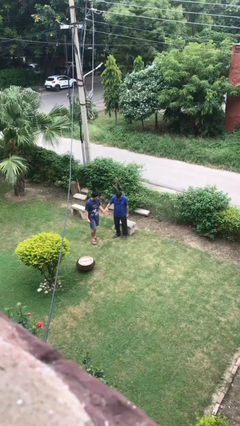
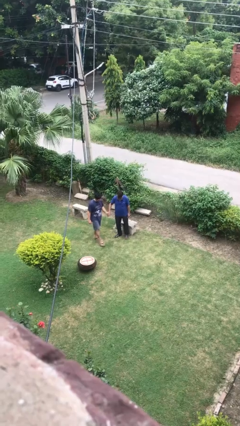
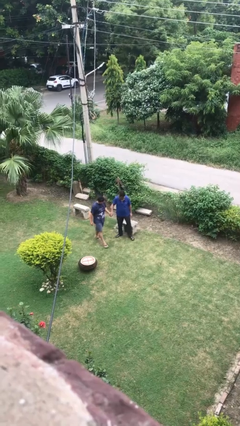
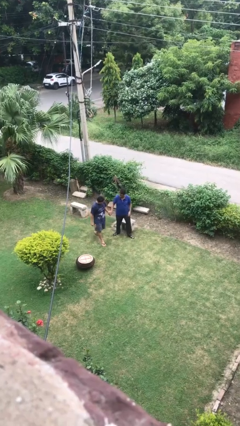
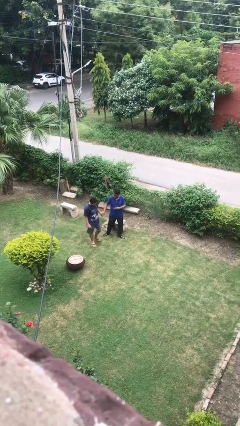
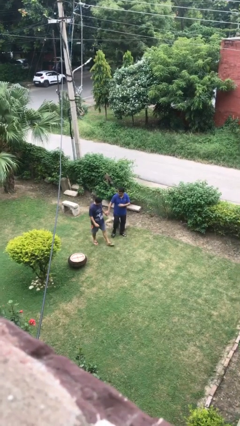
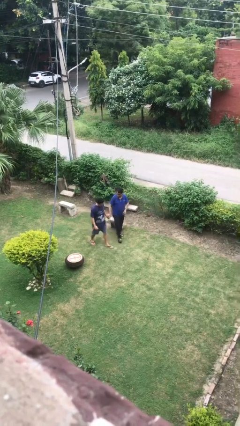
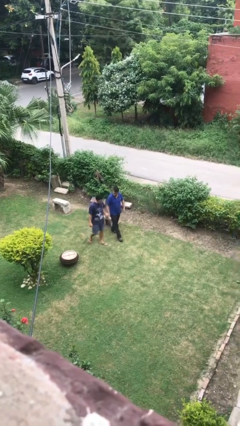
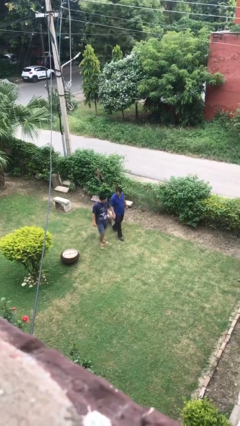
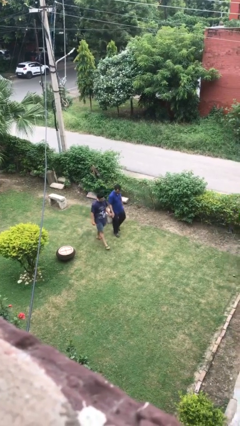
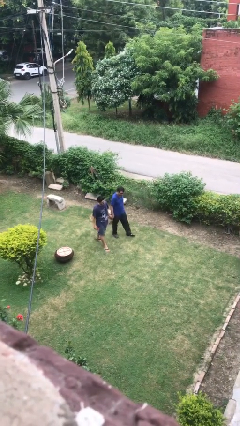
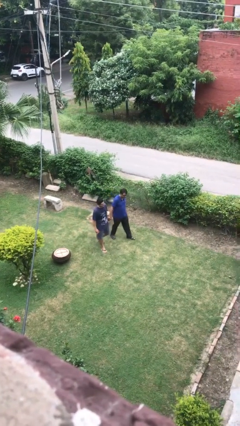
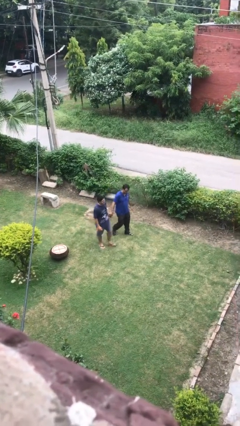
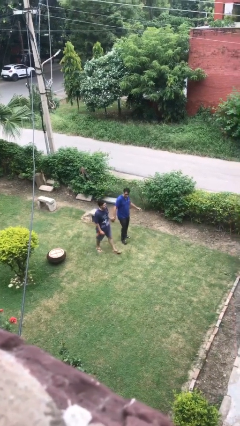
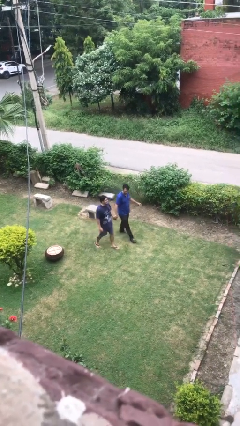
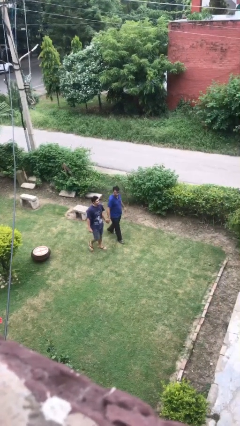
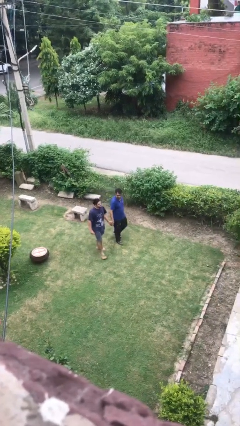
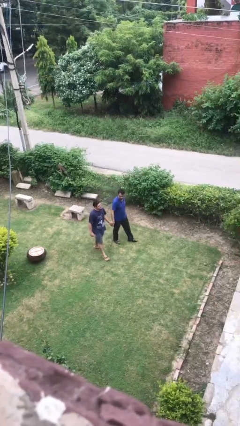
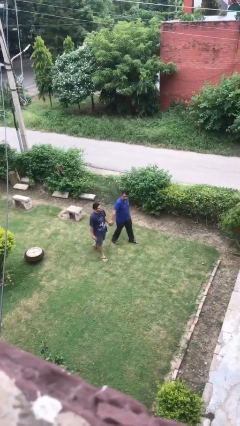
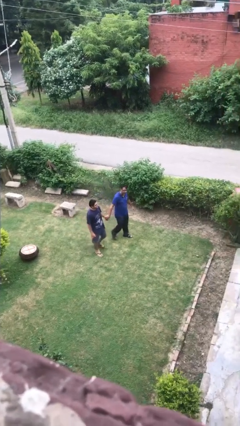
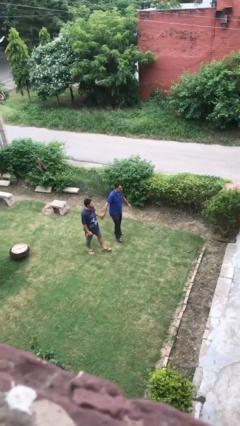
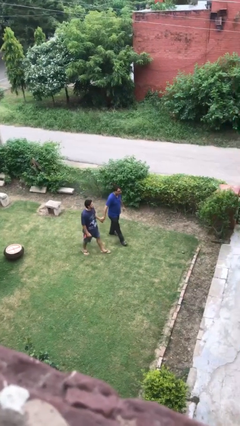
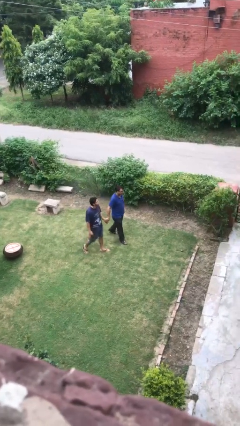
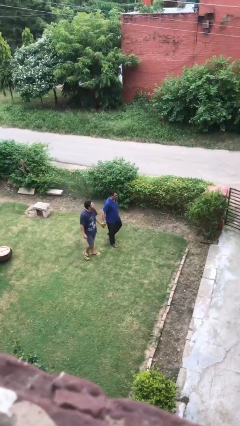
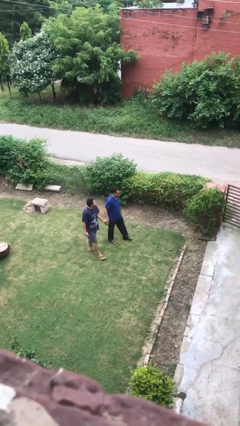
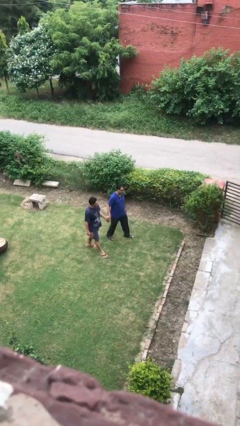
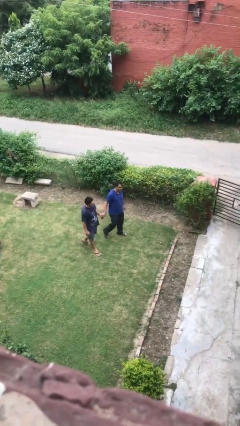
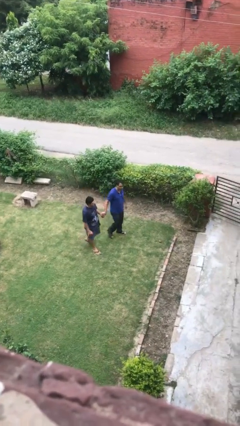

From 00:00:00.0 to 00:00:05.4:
person holds hand

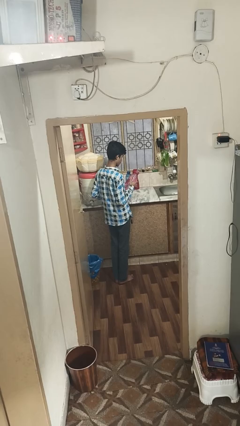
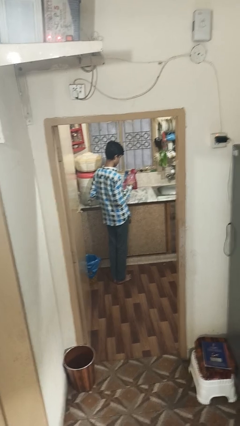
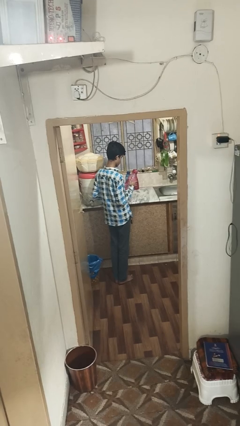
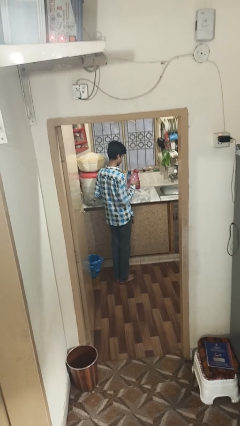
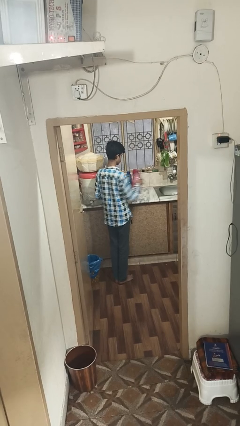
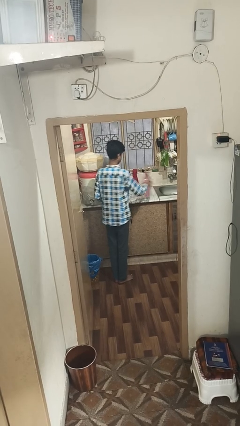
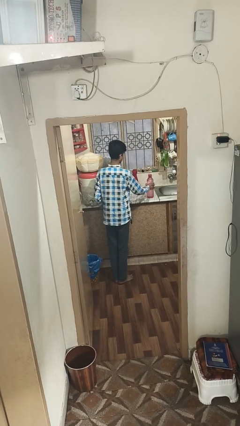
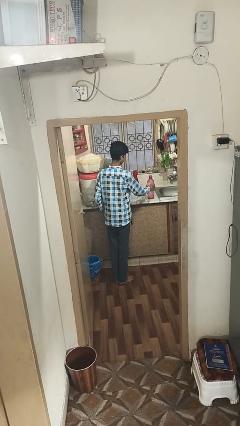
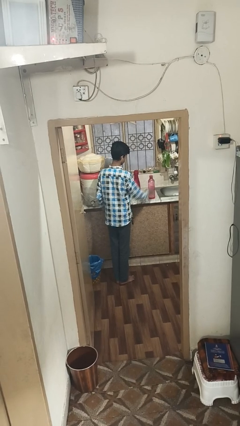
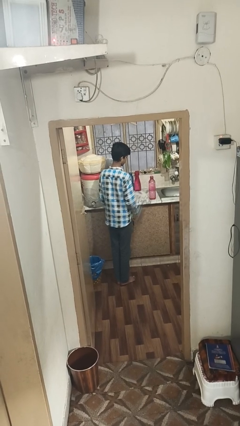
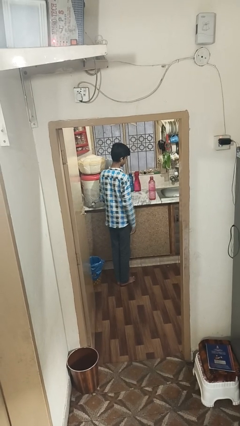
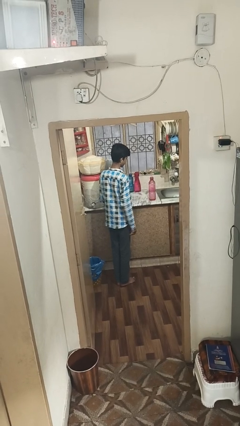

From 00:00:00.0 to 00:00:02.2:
person puts down object on countertop

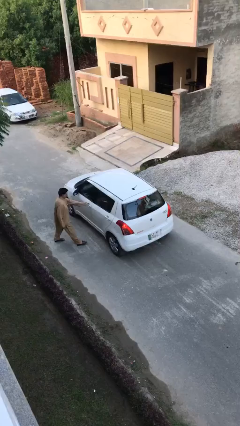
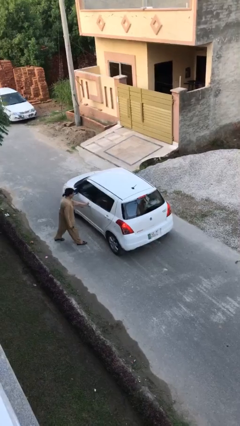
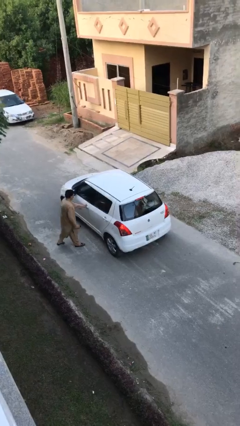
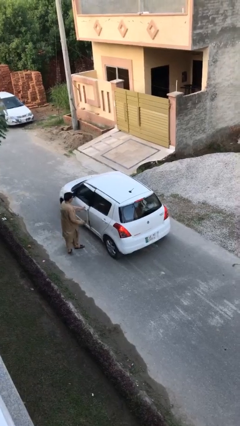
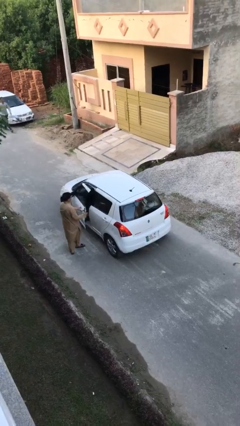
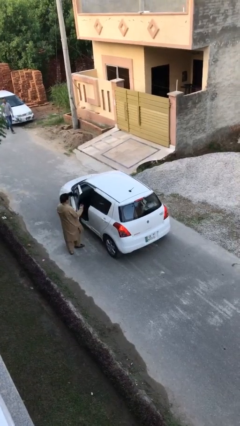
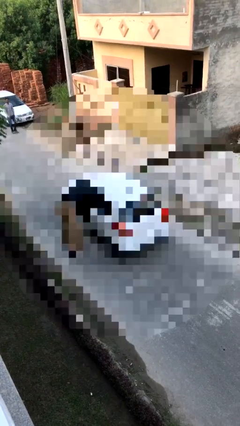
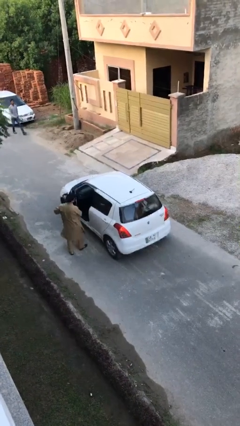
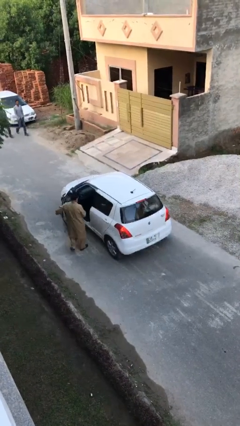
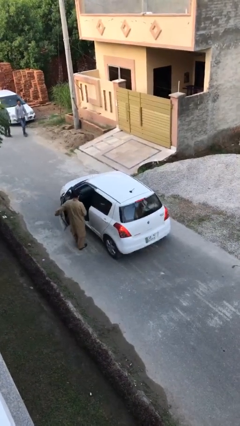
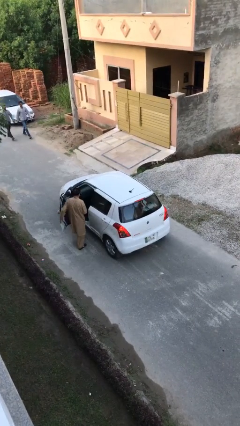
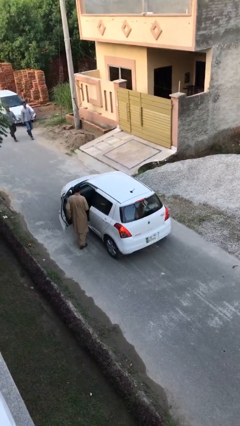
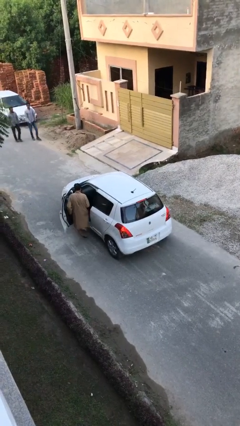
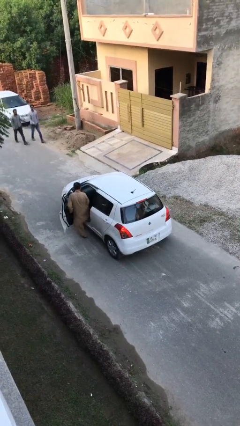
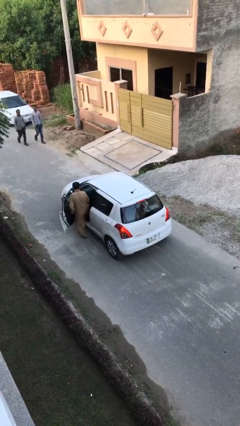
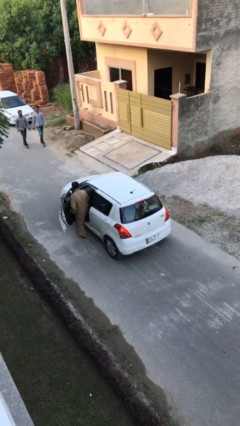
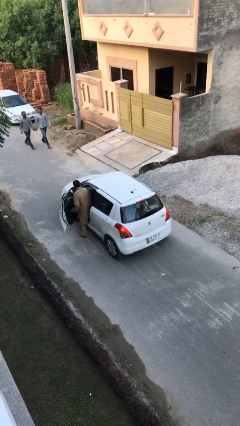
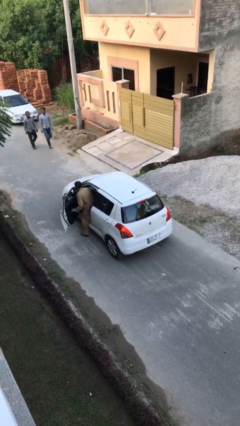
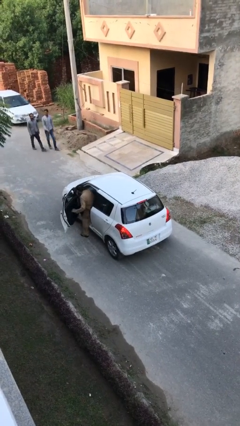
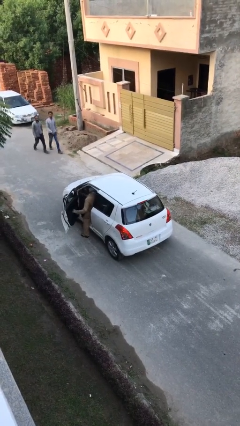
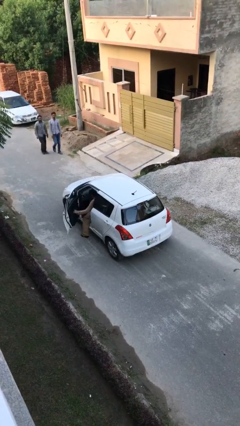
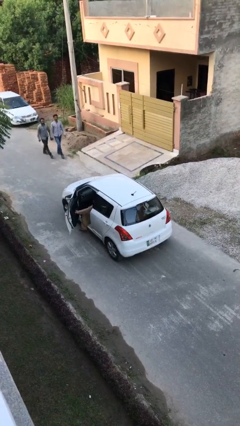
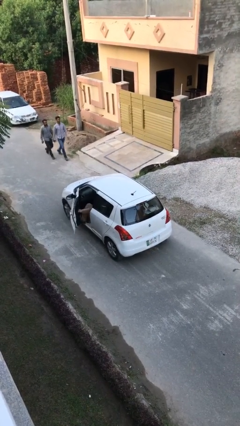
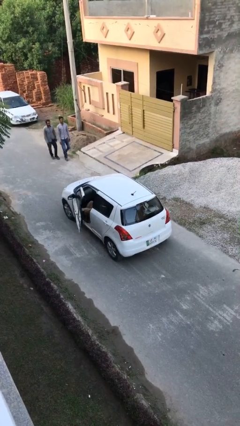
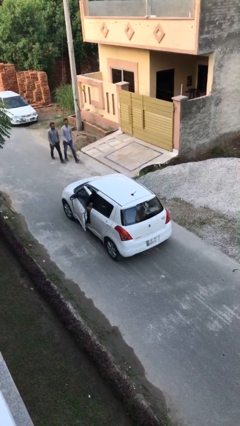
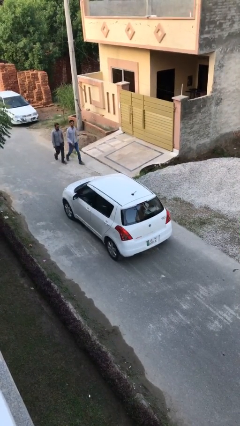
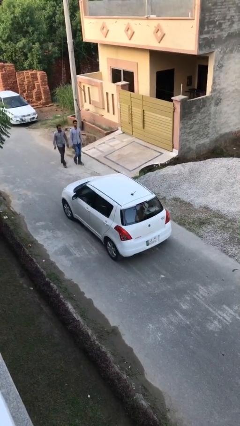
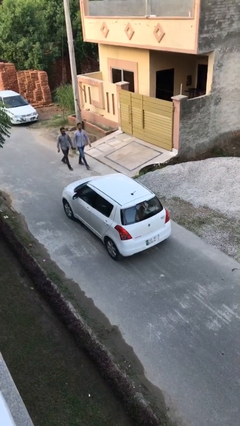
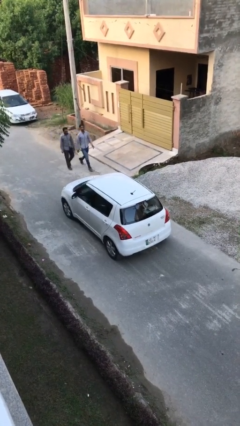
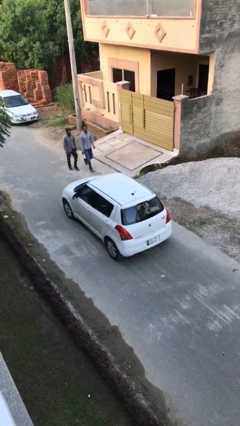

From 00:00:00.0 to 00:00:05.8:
car picks up person

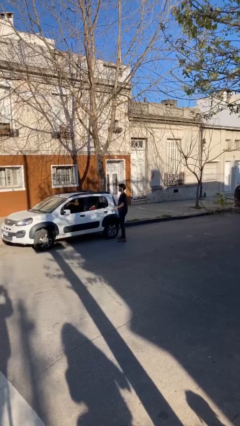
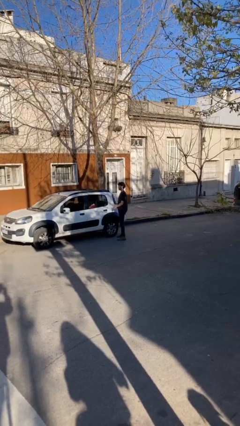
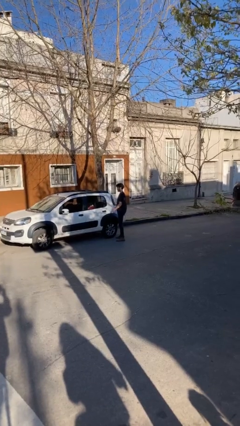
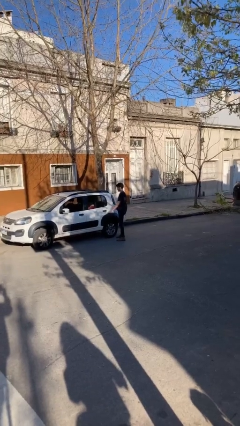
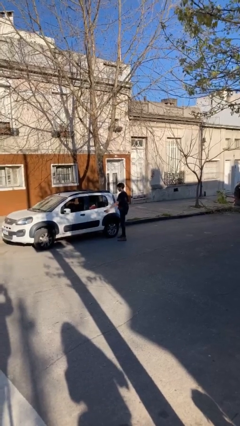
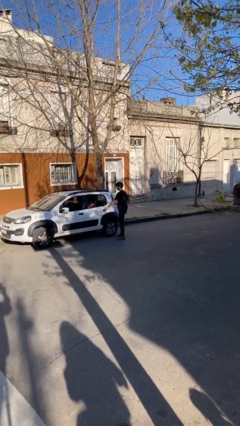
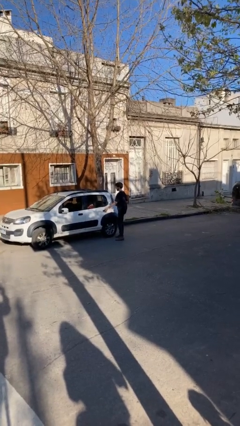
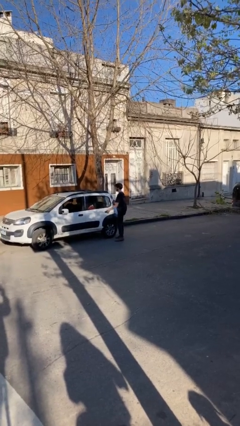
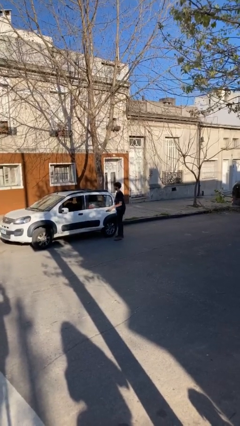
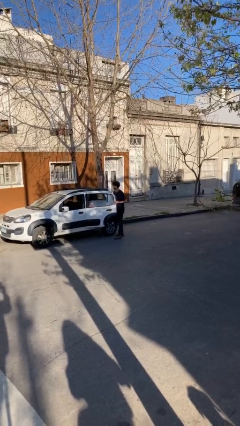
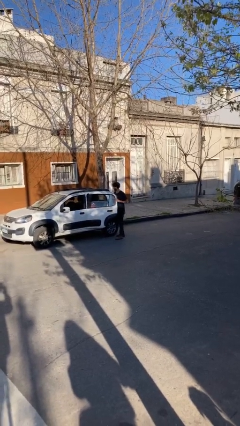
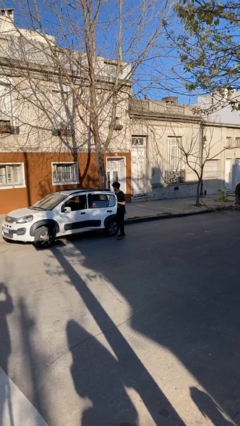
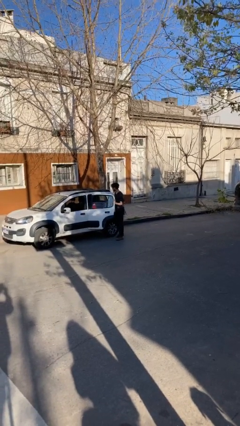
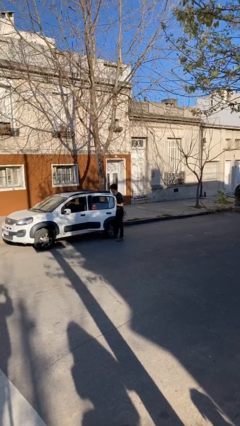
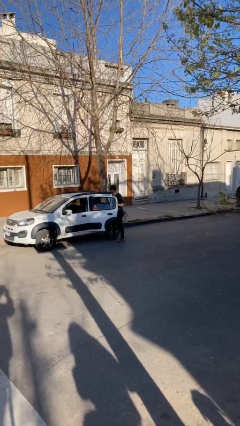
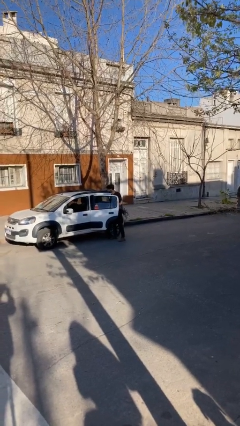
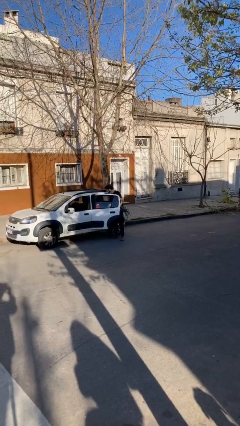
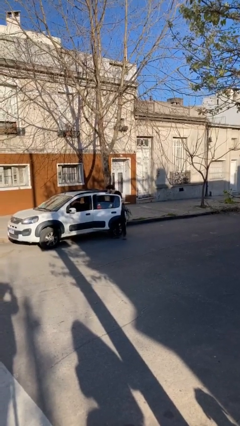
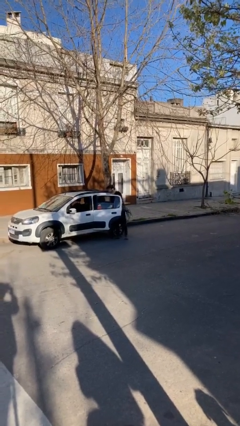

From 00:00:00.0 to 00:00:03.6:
person opens car door

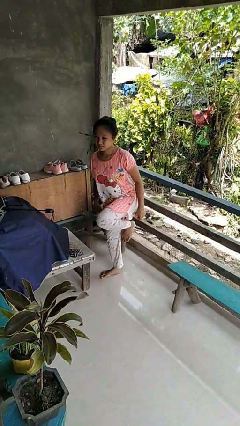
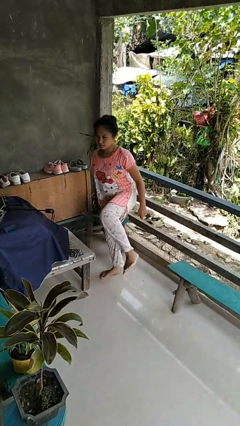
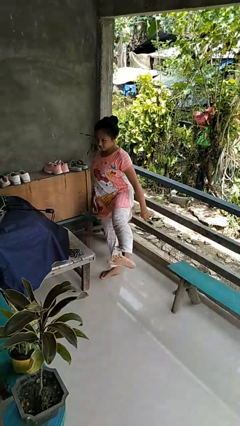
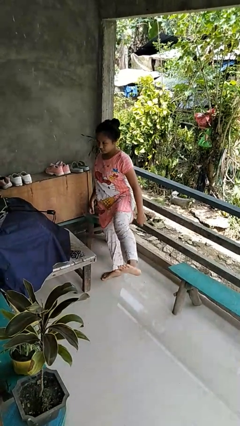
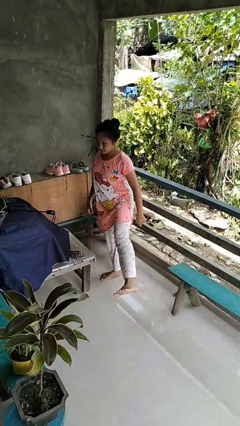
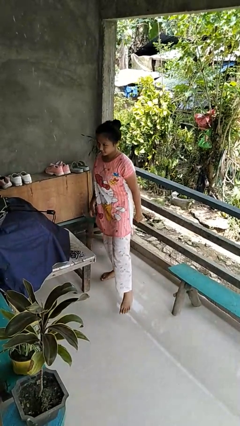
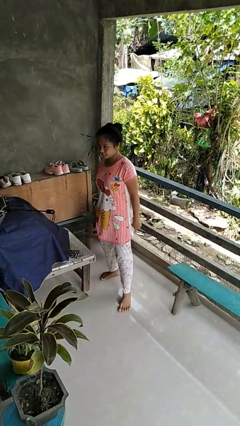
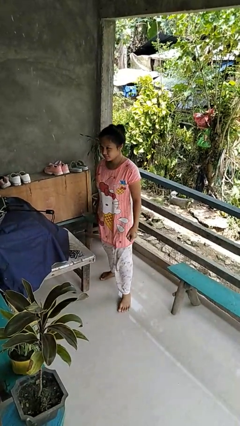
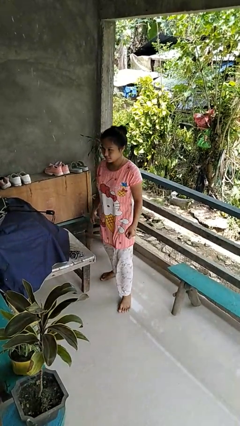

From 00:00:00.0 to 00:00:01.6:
person karate kicks
